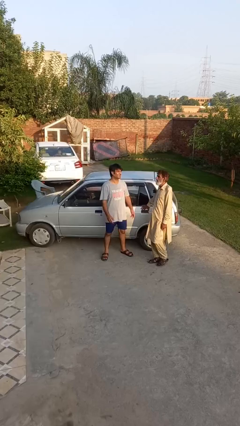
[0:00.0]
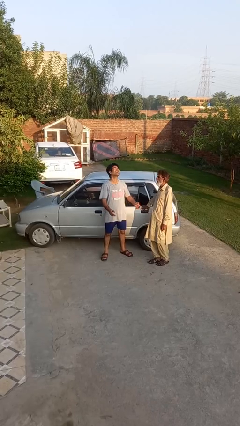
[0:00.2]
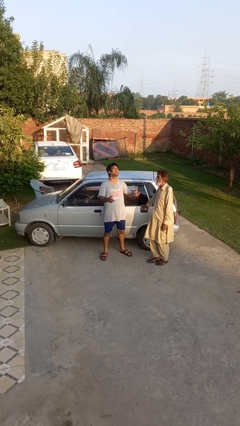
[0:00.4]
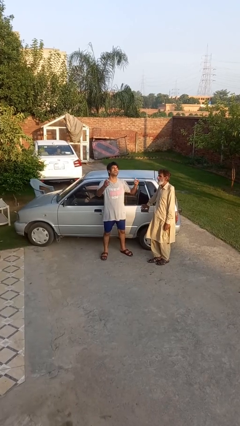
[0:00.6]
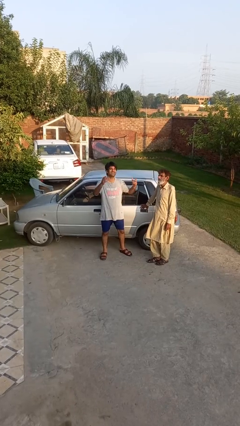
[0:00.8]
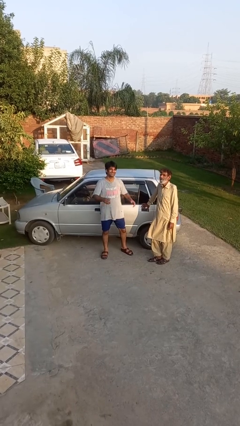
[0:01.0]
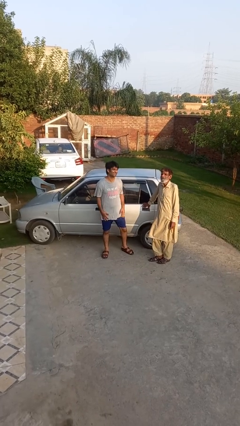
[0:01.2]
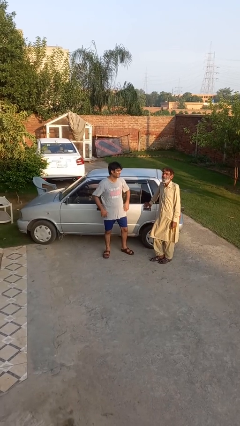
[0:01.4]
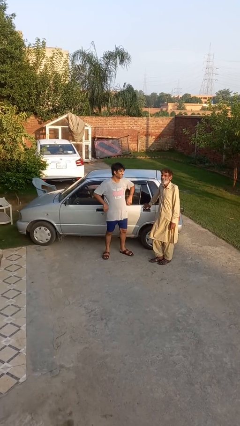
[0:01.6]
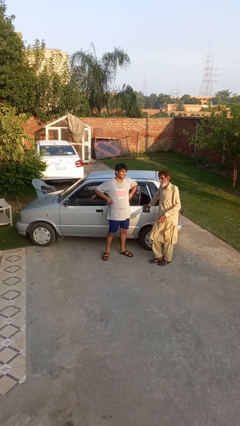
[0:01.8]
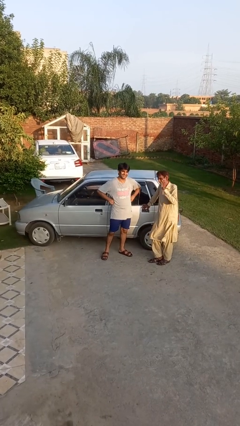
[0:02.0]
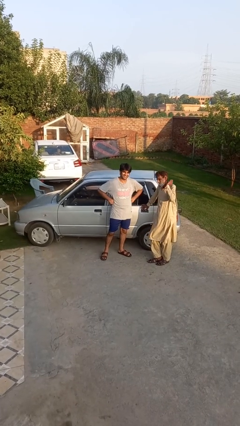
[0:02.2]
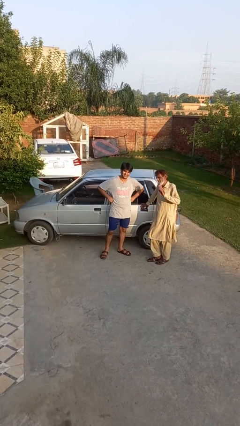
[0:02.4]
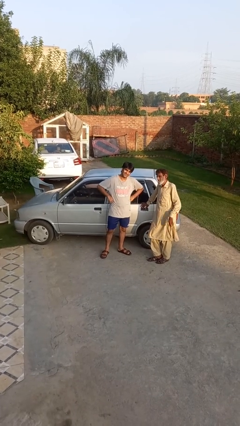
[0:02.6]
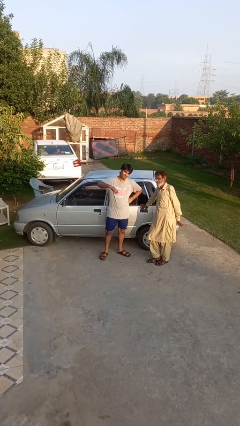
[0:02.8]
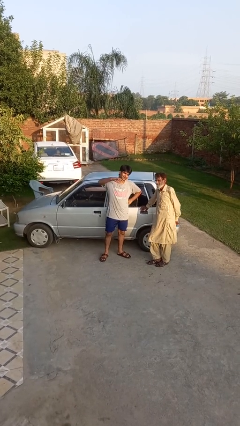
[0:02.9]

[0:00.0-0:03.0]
person laughs with person

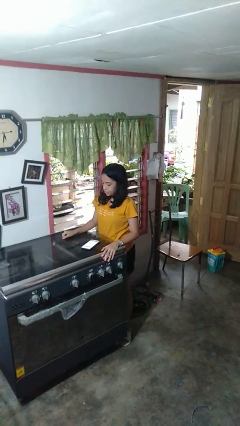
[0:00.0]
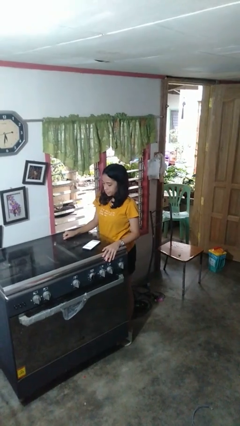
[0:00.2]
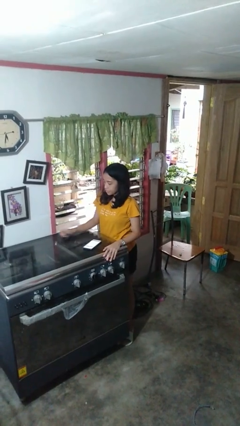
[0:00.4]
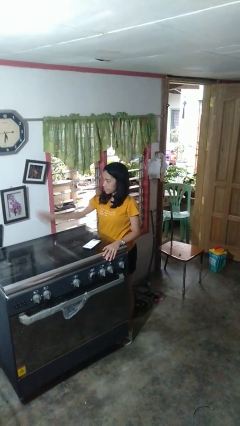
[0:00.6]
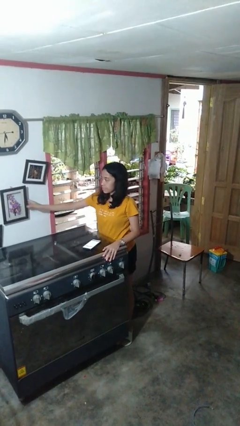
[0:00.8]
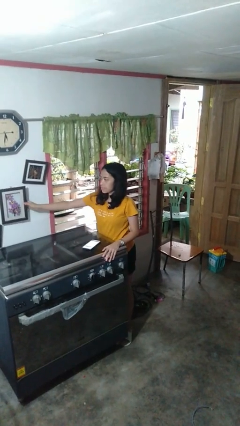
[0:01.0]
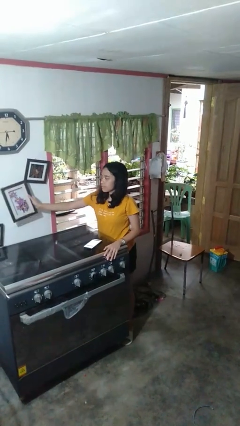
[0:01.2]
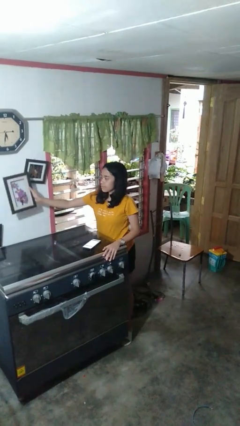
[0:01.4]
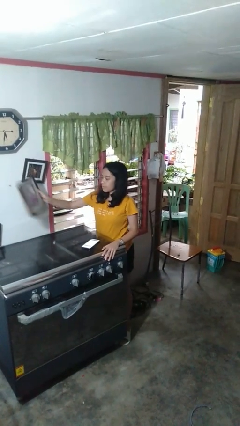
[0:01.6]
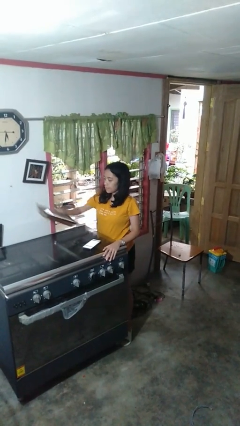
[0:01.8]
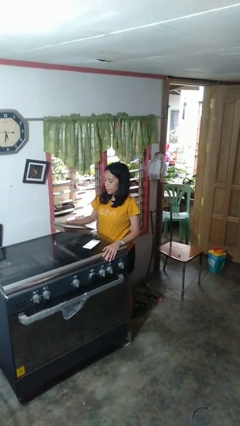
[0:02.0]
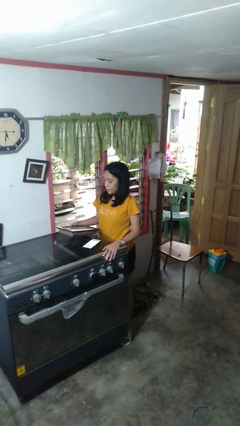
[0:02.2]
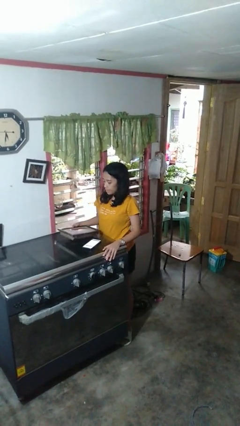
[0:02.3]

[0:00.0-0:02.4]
person takes down picture frame

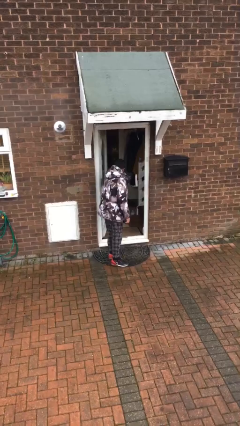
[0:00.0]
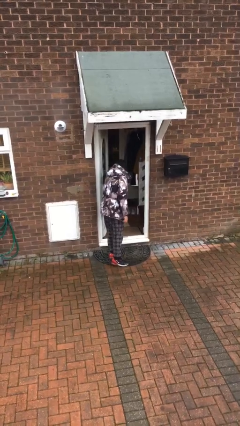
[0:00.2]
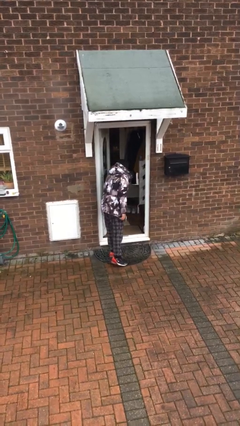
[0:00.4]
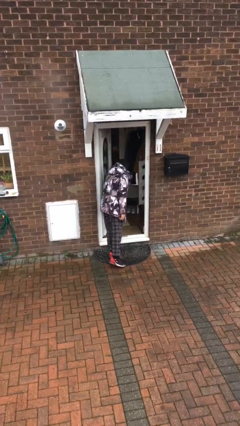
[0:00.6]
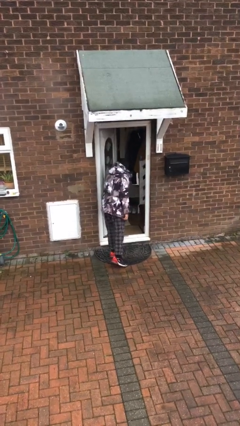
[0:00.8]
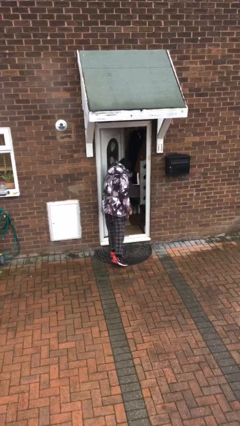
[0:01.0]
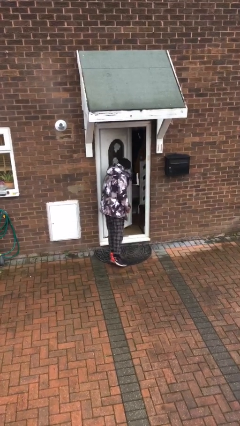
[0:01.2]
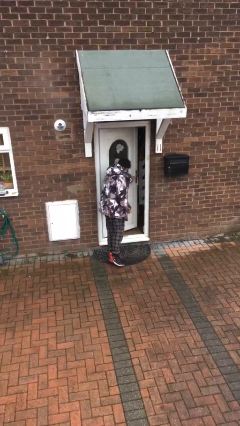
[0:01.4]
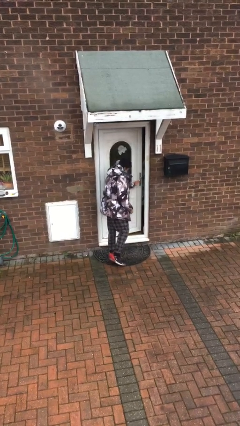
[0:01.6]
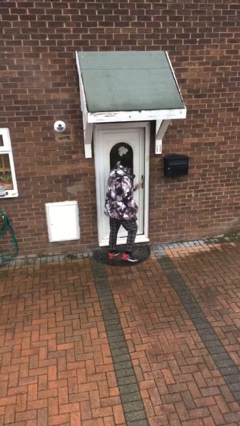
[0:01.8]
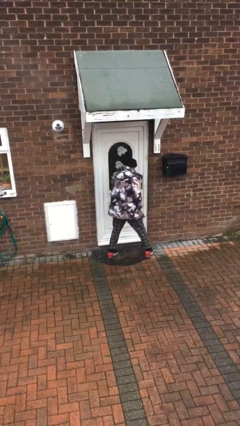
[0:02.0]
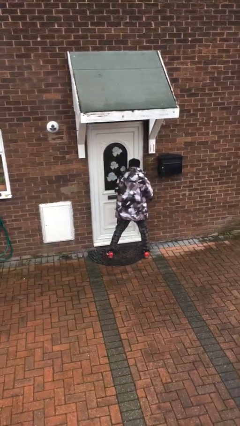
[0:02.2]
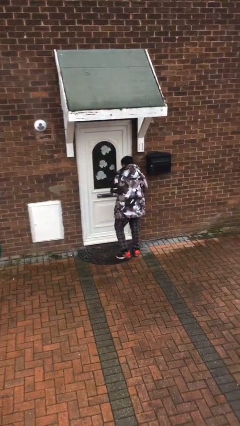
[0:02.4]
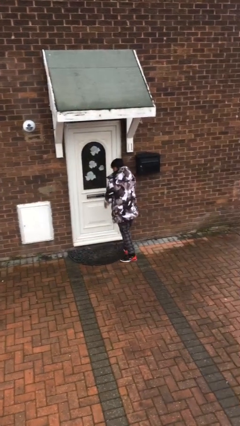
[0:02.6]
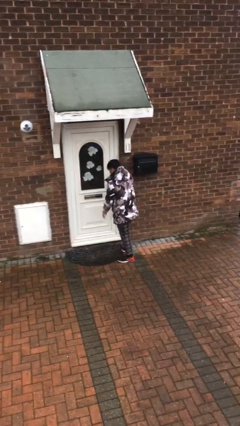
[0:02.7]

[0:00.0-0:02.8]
person closes facility door

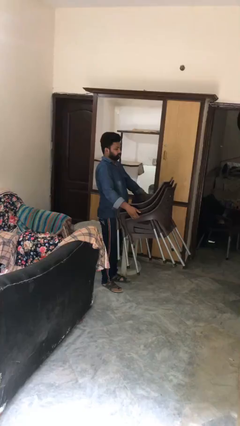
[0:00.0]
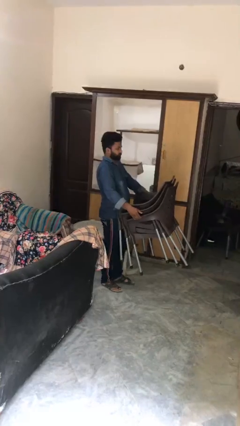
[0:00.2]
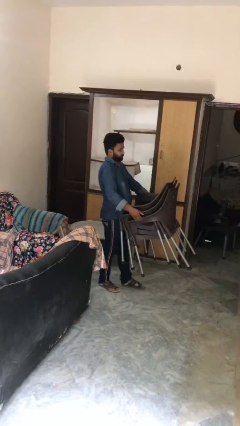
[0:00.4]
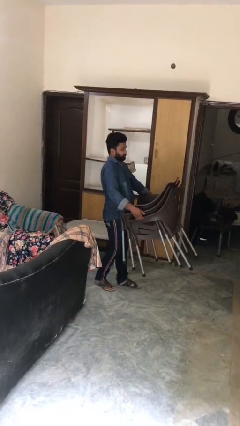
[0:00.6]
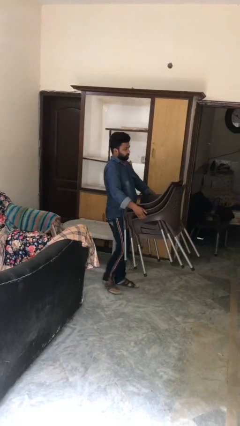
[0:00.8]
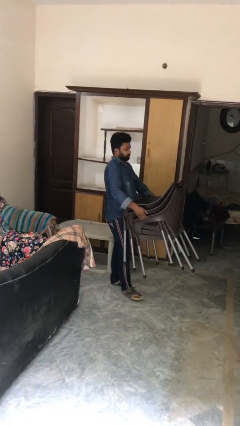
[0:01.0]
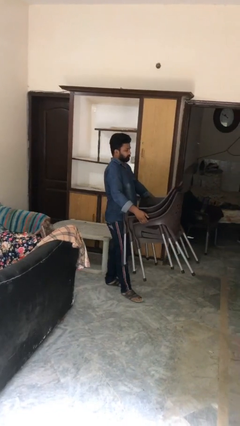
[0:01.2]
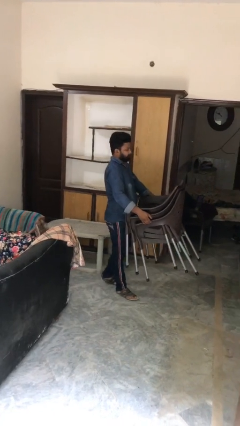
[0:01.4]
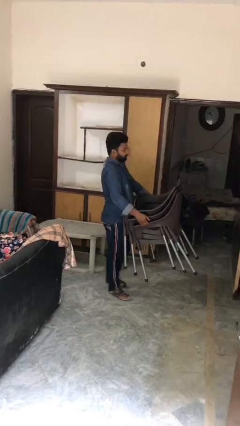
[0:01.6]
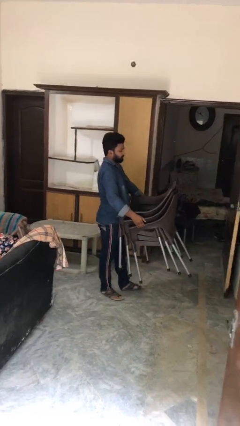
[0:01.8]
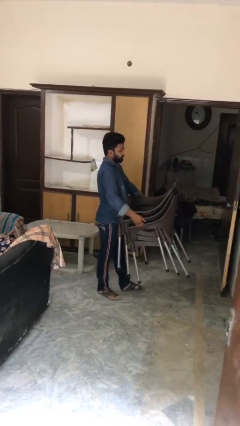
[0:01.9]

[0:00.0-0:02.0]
person carries heavy object

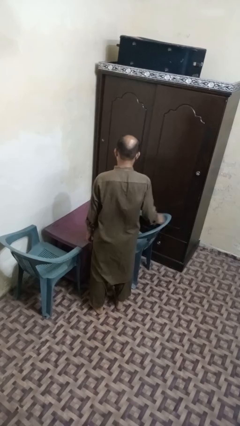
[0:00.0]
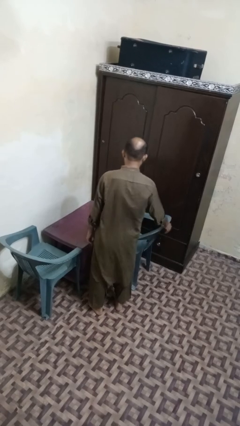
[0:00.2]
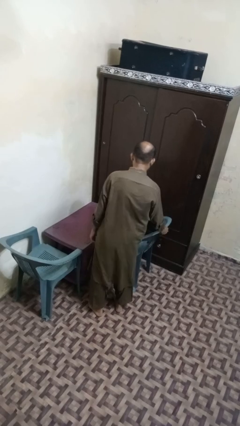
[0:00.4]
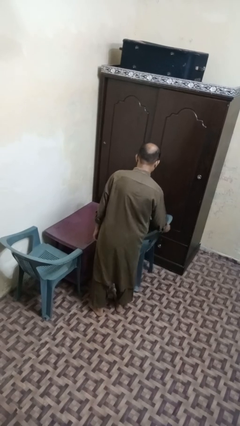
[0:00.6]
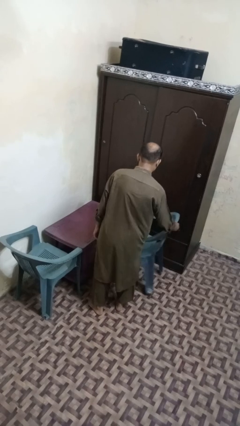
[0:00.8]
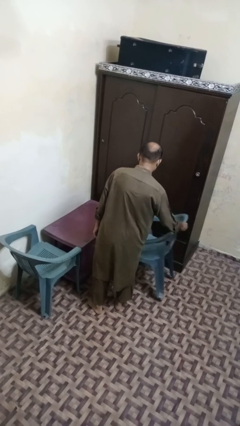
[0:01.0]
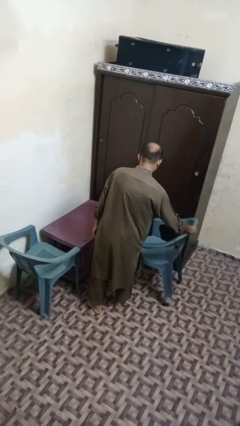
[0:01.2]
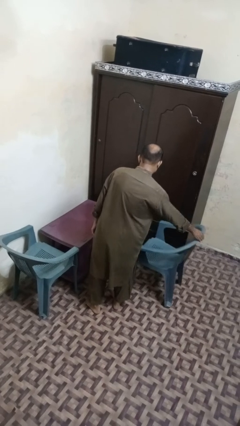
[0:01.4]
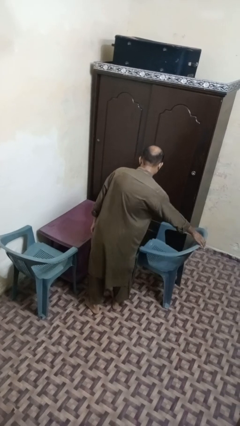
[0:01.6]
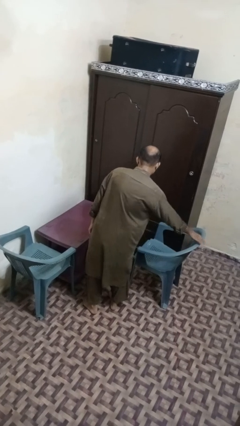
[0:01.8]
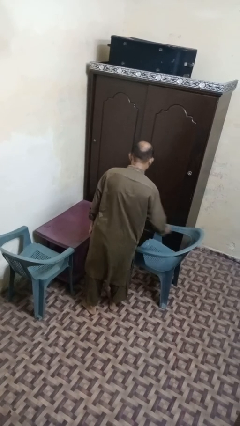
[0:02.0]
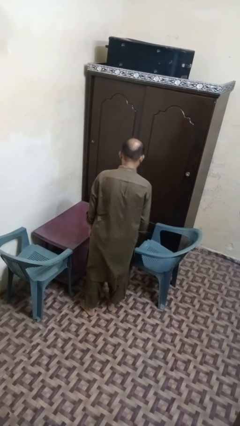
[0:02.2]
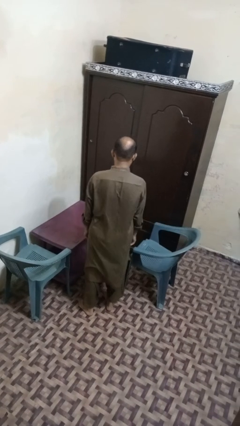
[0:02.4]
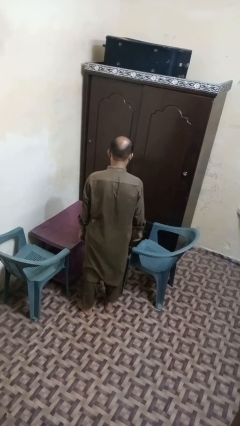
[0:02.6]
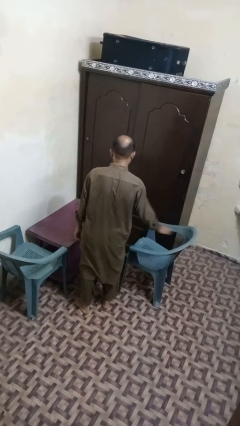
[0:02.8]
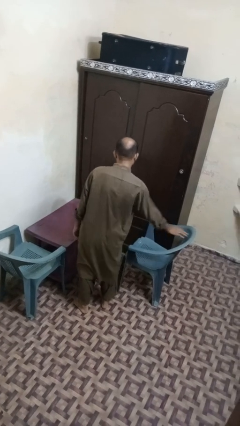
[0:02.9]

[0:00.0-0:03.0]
person pulls out chair

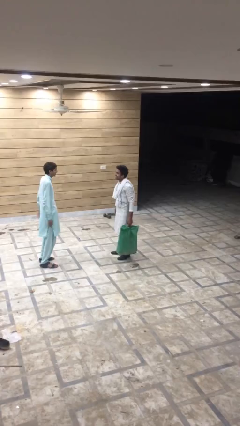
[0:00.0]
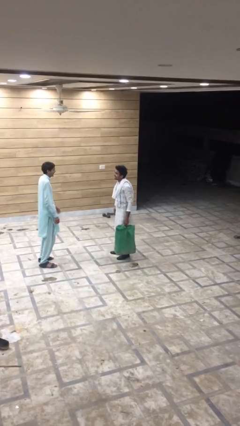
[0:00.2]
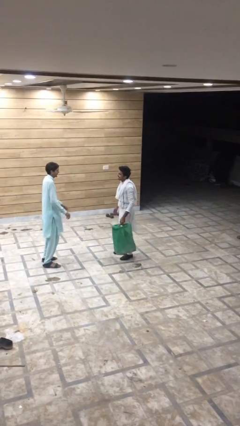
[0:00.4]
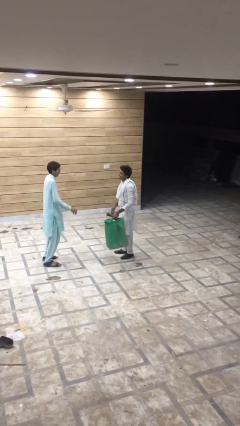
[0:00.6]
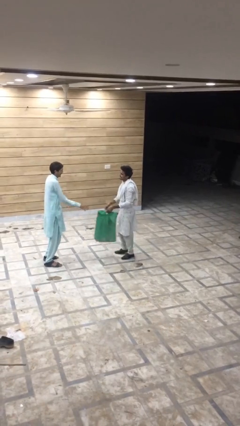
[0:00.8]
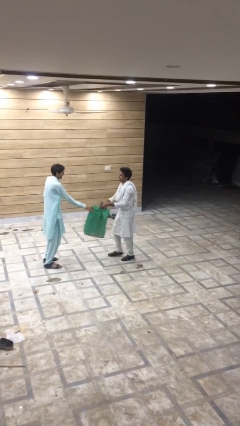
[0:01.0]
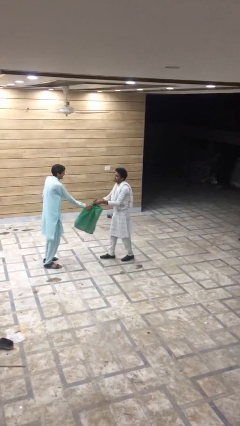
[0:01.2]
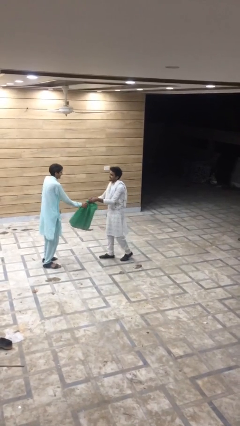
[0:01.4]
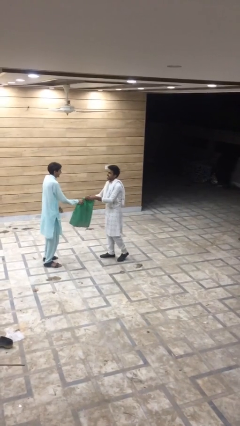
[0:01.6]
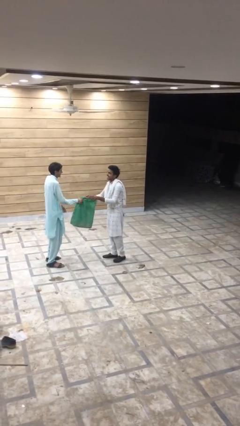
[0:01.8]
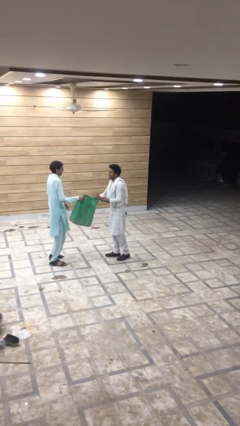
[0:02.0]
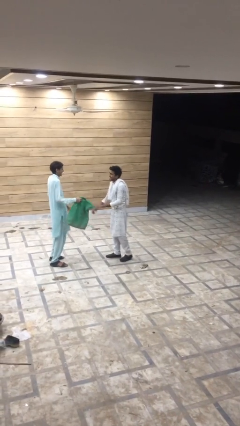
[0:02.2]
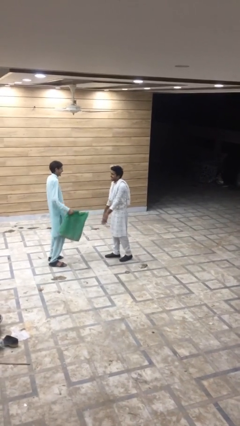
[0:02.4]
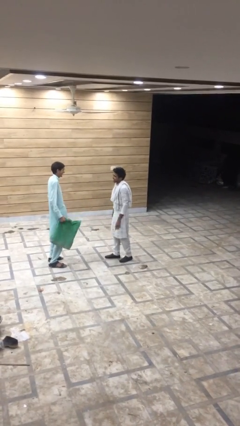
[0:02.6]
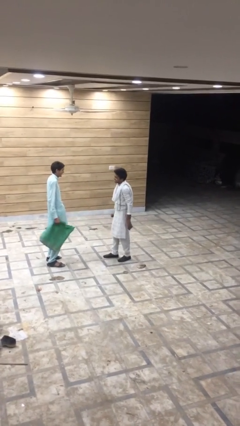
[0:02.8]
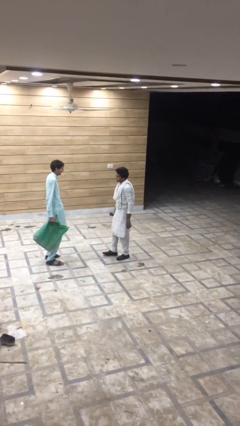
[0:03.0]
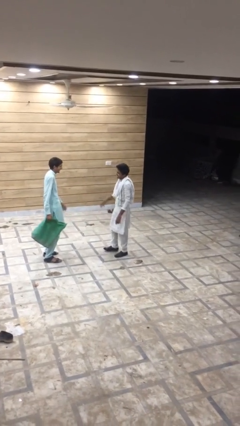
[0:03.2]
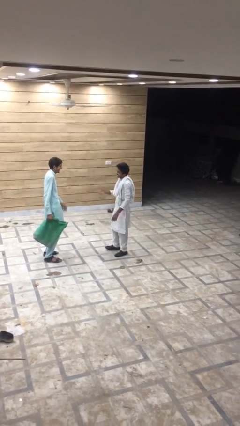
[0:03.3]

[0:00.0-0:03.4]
person transfers object to person

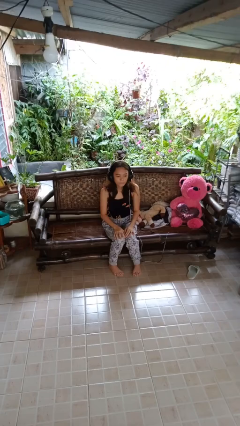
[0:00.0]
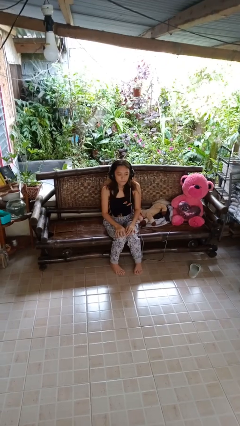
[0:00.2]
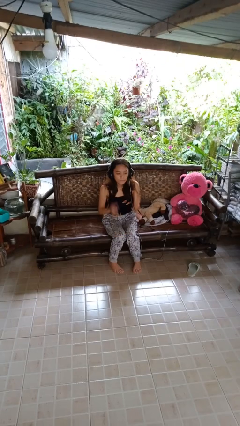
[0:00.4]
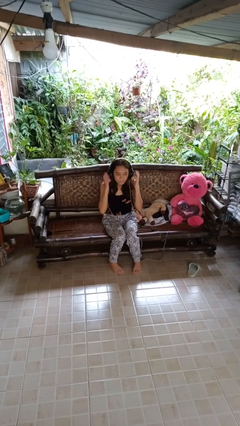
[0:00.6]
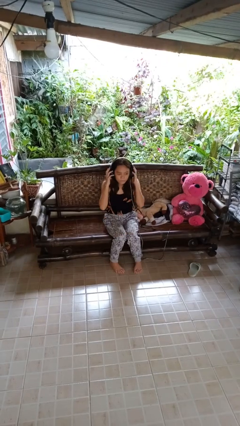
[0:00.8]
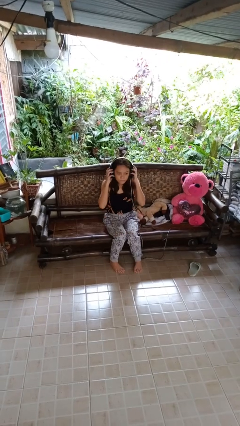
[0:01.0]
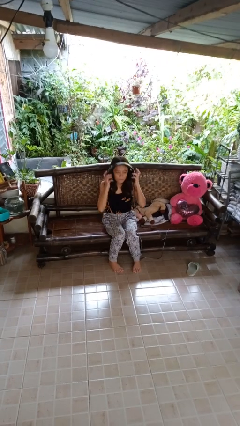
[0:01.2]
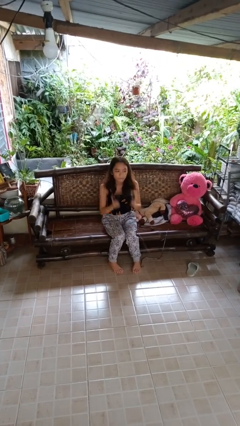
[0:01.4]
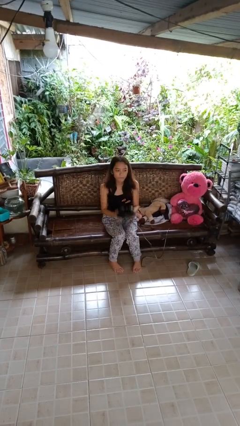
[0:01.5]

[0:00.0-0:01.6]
person takes off headphones
